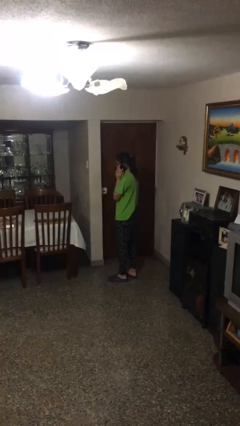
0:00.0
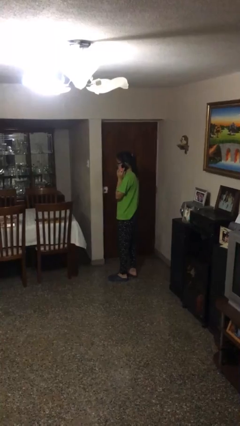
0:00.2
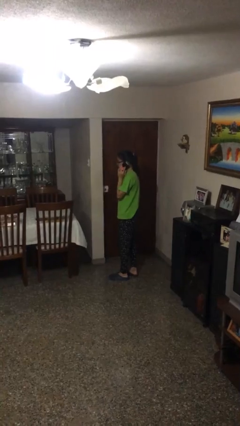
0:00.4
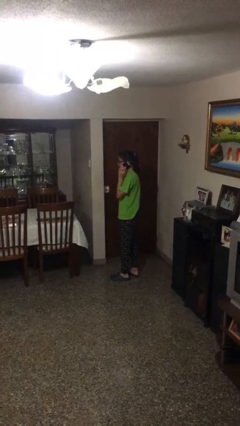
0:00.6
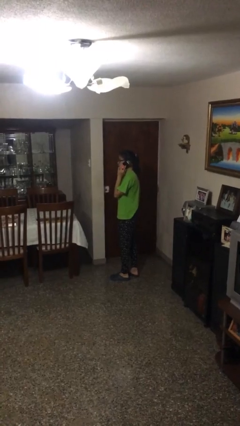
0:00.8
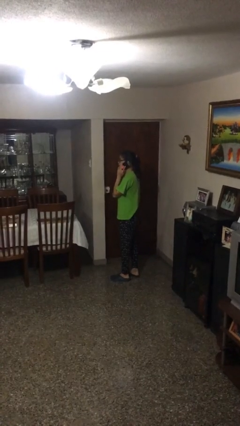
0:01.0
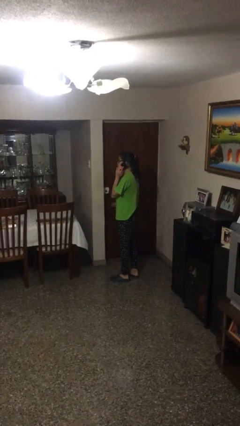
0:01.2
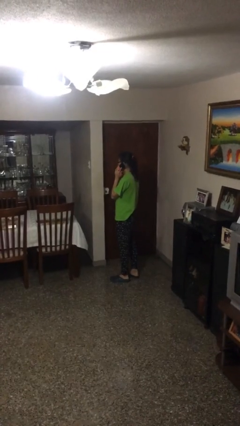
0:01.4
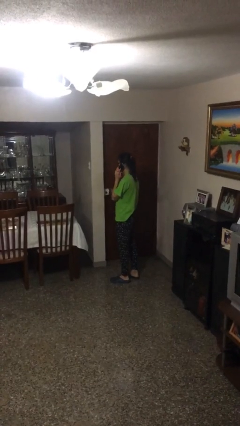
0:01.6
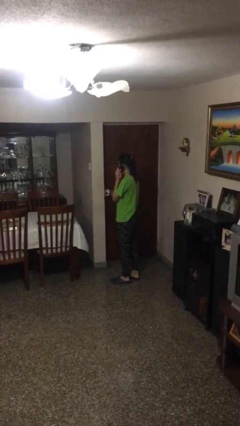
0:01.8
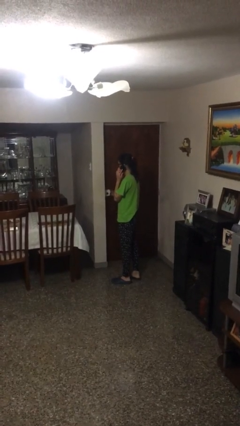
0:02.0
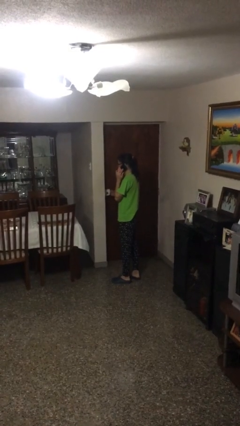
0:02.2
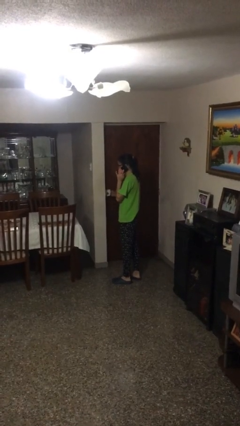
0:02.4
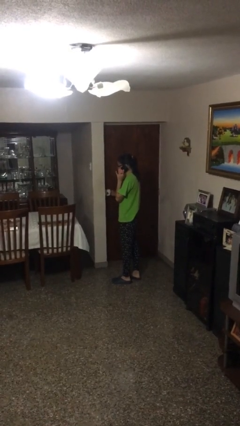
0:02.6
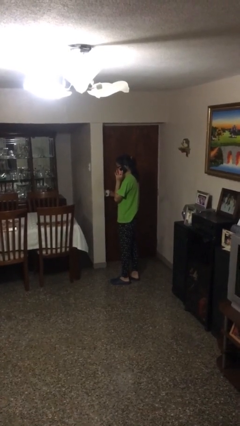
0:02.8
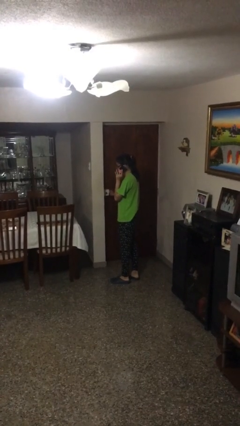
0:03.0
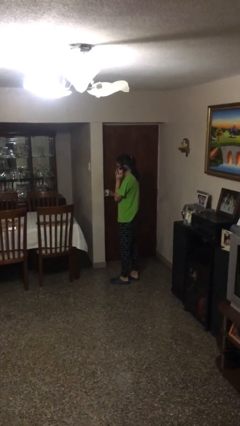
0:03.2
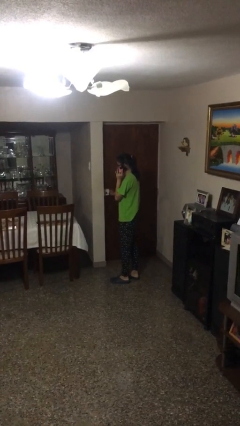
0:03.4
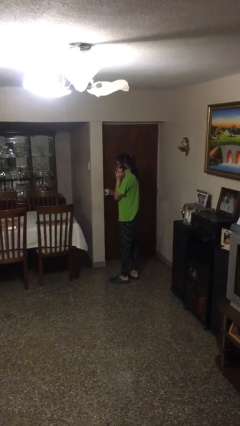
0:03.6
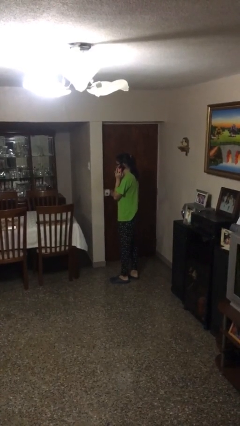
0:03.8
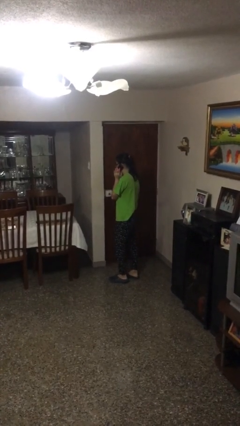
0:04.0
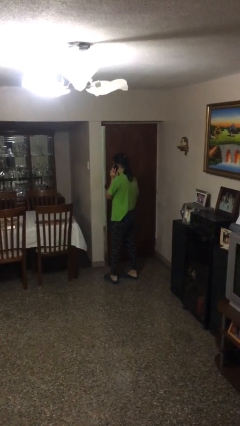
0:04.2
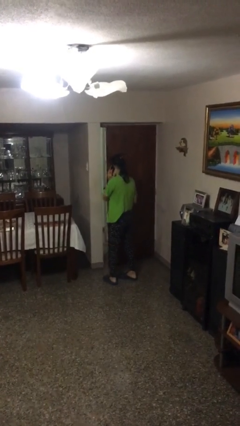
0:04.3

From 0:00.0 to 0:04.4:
person opens facility door

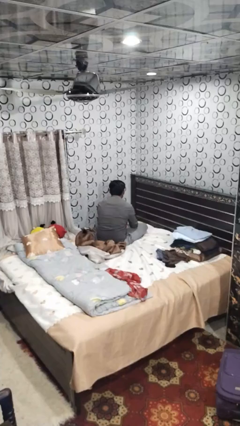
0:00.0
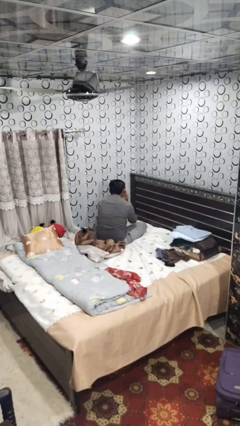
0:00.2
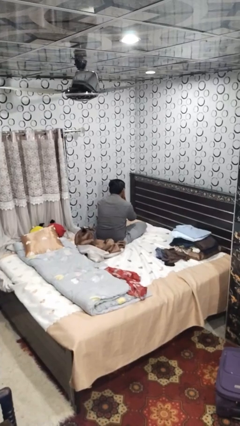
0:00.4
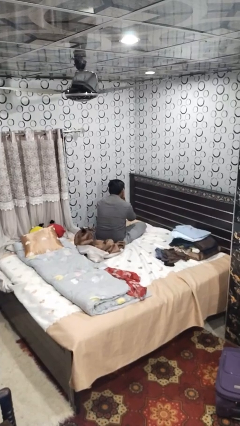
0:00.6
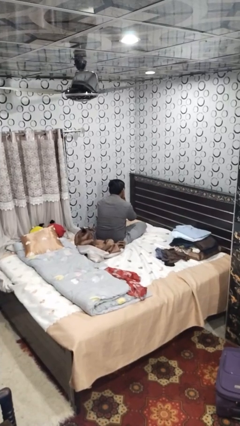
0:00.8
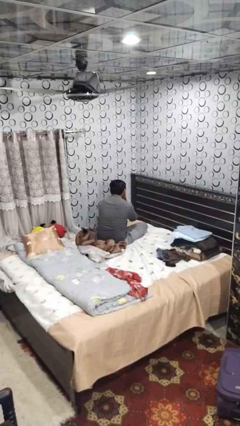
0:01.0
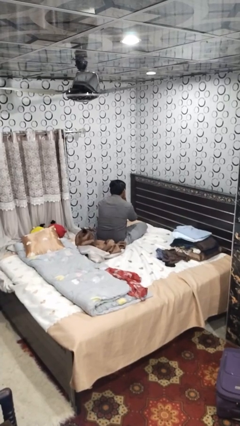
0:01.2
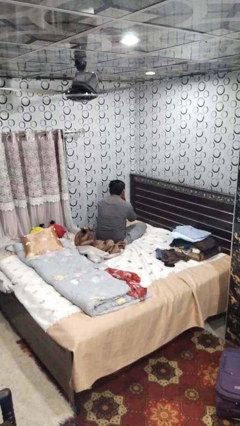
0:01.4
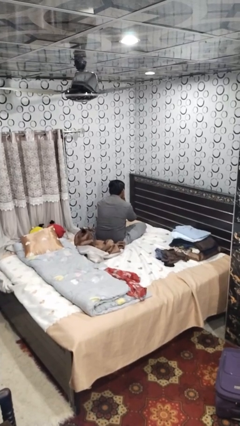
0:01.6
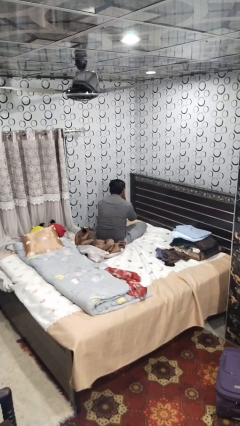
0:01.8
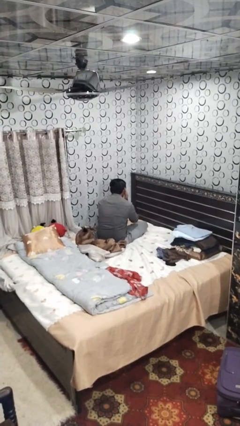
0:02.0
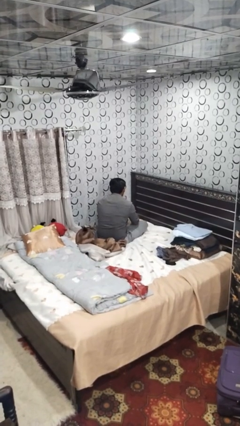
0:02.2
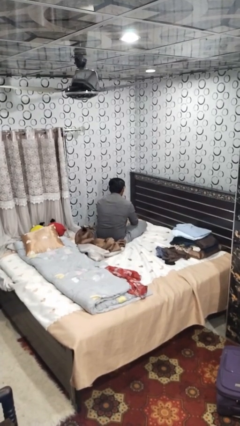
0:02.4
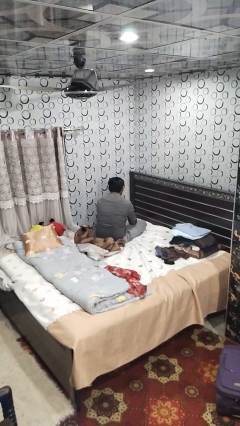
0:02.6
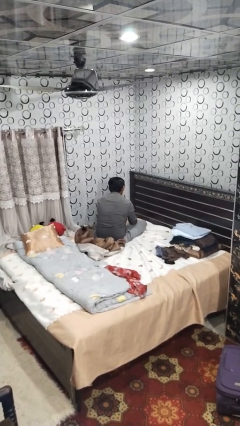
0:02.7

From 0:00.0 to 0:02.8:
person covers face with hands

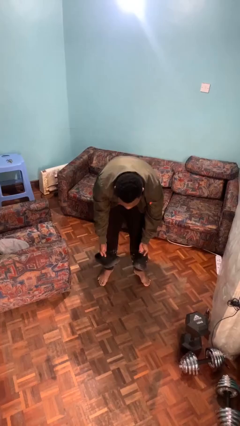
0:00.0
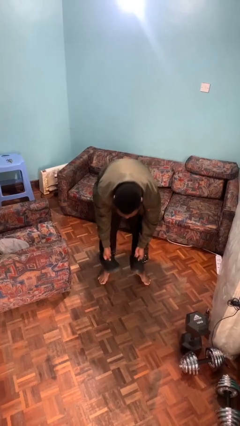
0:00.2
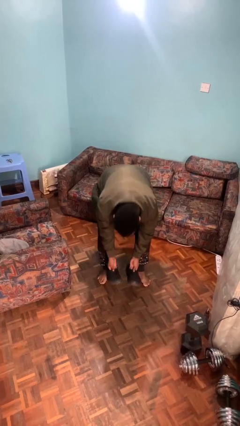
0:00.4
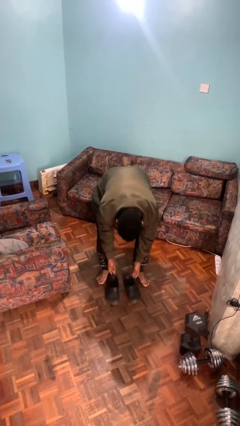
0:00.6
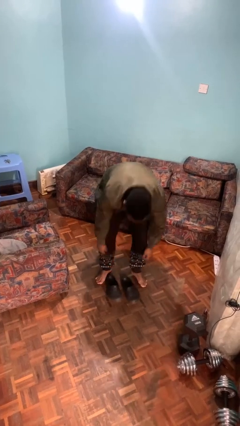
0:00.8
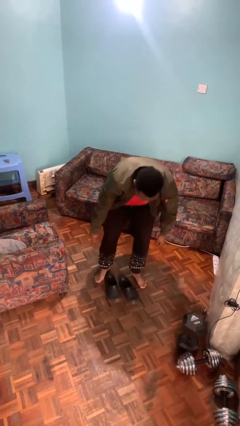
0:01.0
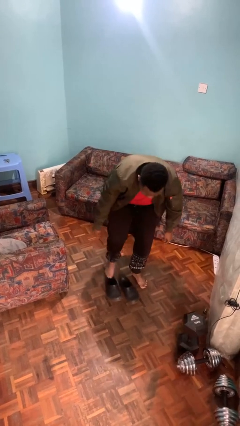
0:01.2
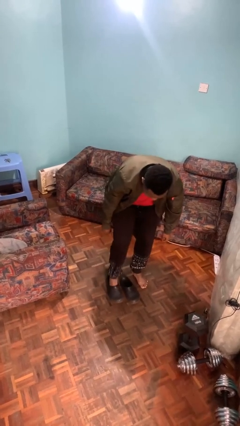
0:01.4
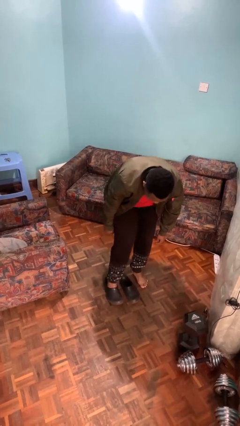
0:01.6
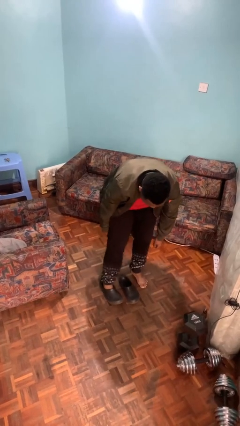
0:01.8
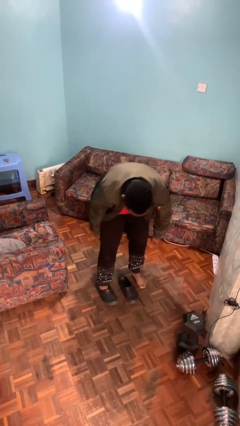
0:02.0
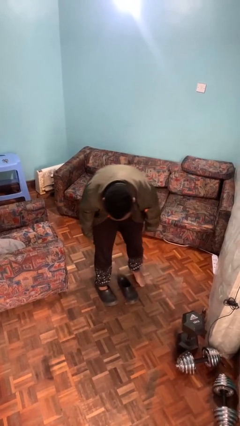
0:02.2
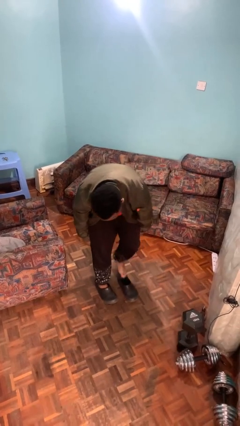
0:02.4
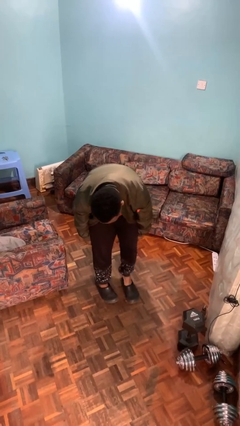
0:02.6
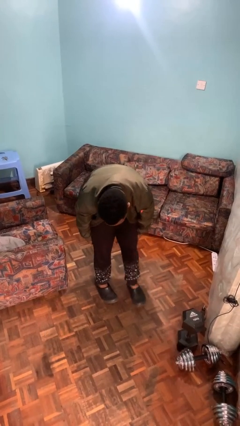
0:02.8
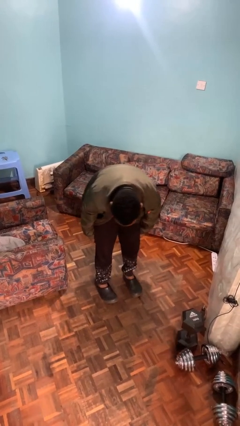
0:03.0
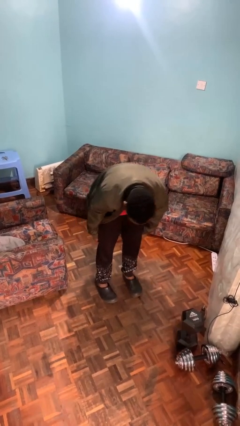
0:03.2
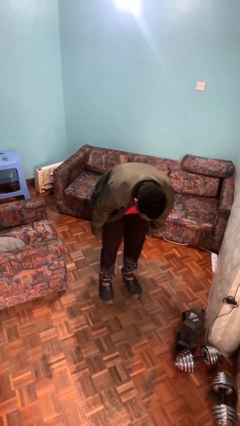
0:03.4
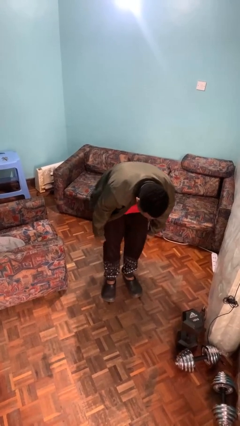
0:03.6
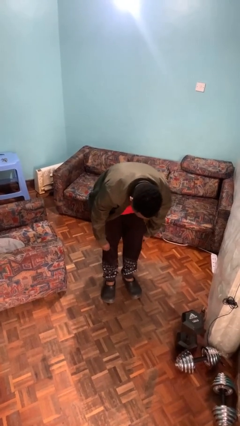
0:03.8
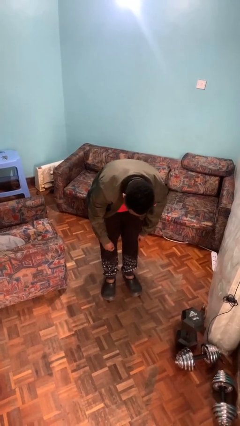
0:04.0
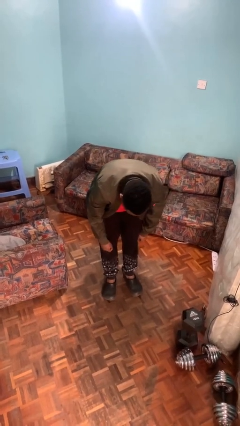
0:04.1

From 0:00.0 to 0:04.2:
person puts on shoes

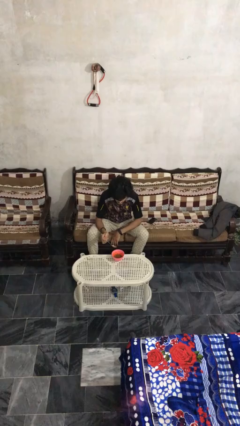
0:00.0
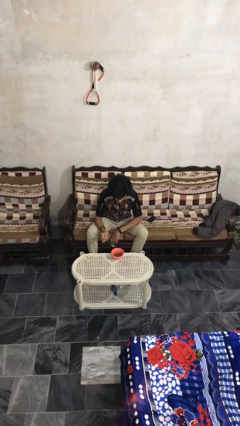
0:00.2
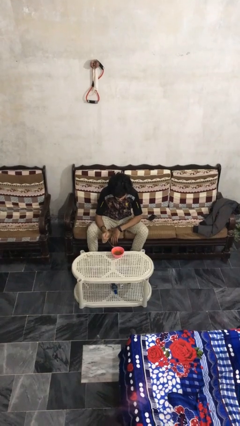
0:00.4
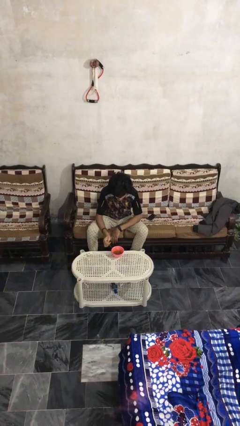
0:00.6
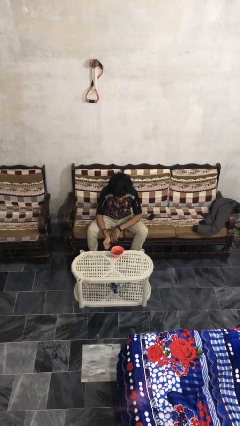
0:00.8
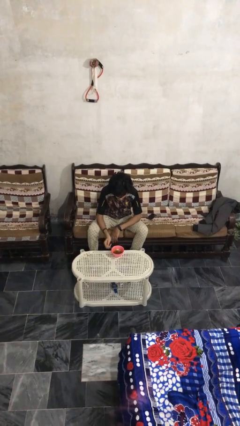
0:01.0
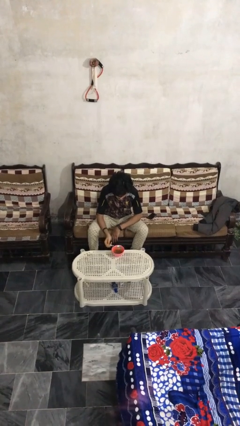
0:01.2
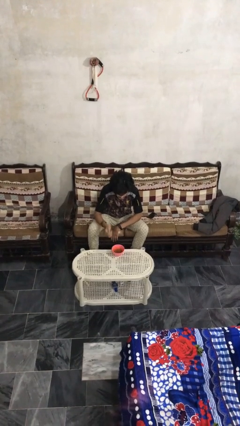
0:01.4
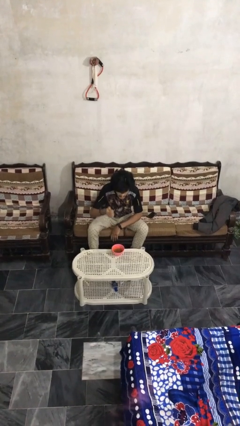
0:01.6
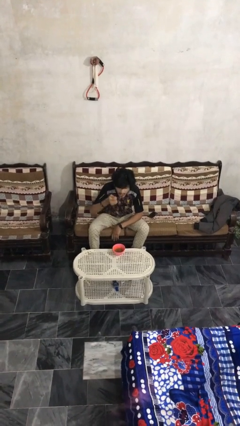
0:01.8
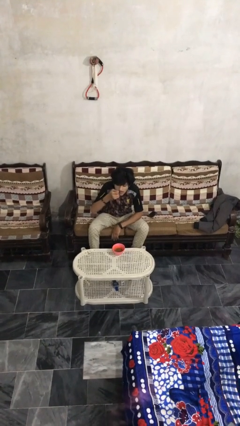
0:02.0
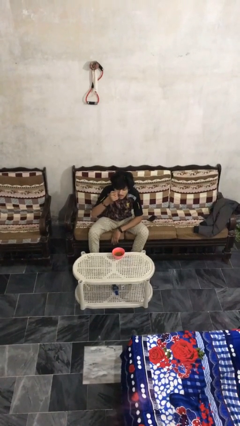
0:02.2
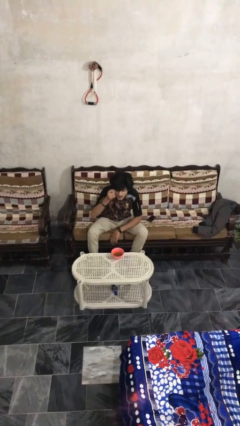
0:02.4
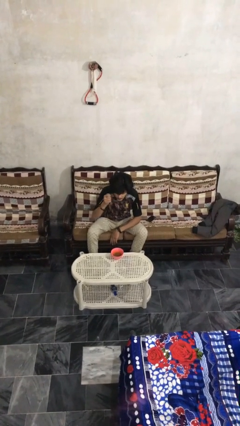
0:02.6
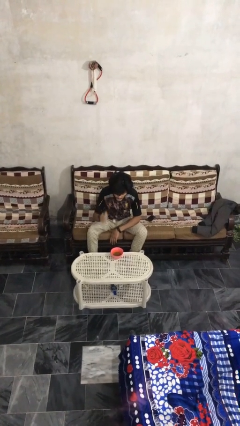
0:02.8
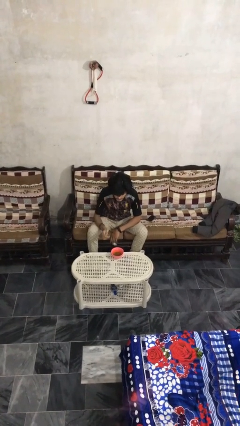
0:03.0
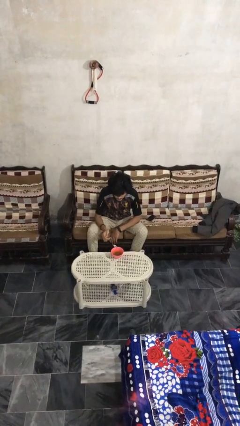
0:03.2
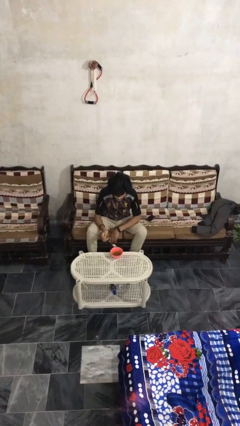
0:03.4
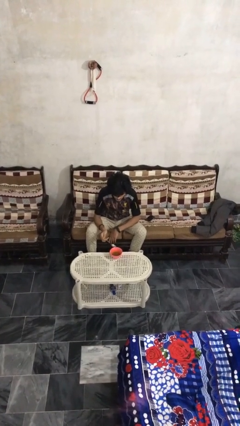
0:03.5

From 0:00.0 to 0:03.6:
person eats with utensil

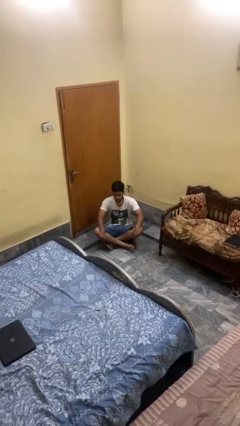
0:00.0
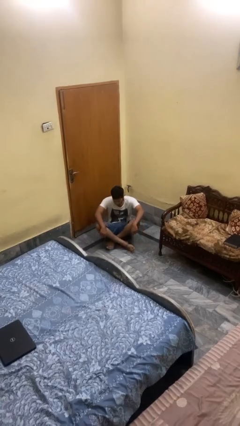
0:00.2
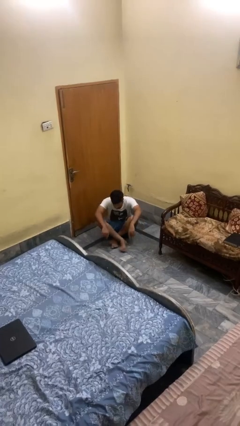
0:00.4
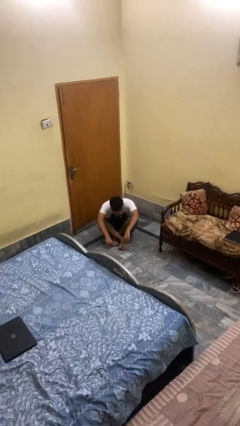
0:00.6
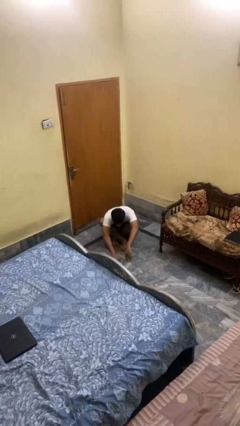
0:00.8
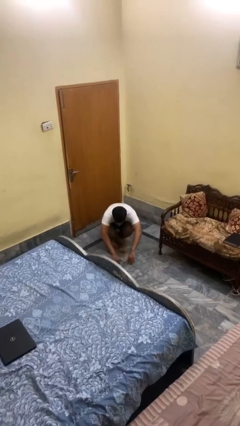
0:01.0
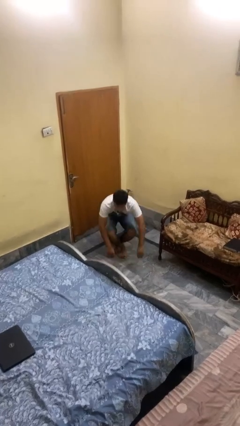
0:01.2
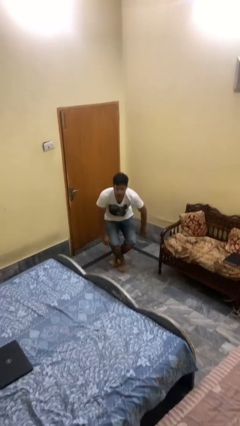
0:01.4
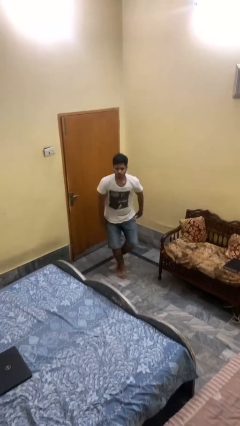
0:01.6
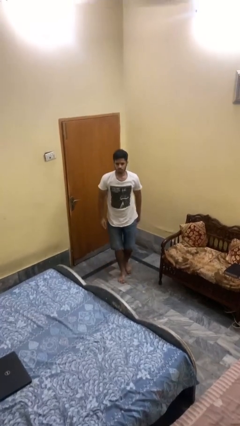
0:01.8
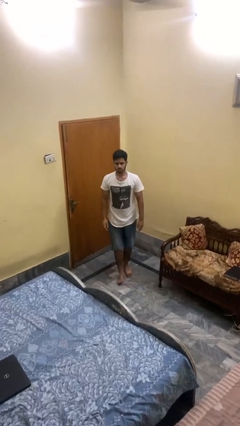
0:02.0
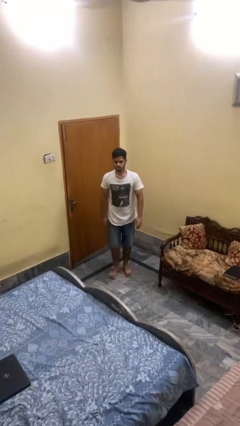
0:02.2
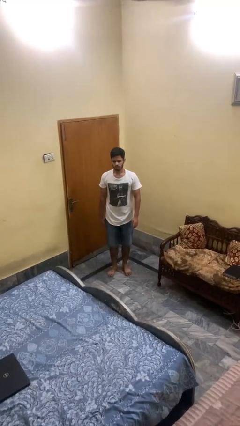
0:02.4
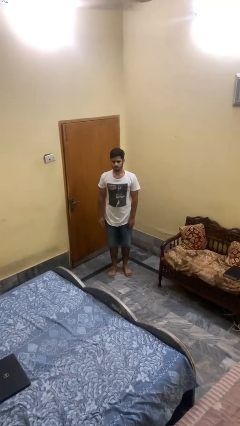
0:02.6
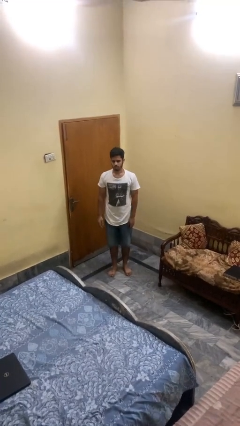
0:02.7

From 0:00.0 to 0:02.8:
person stands up from floor
